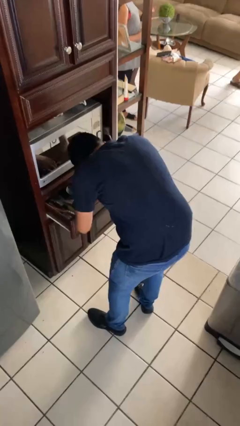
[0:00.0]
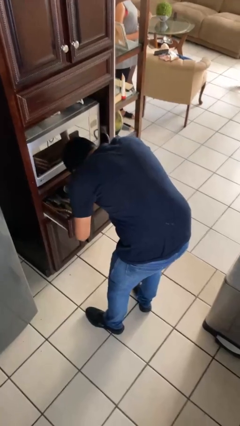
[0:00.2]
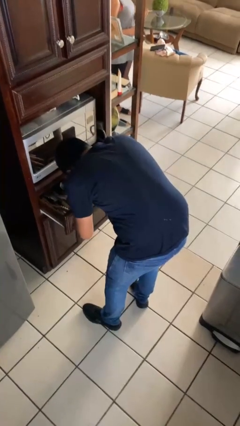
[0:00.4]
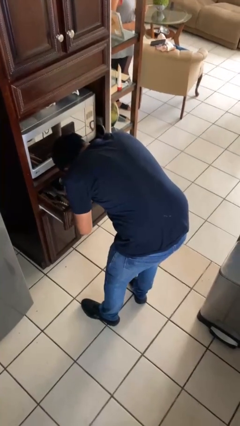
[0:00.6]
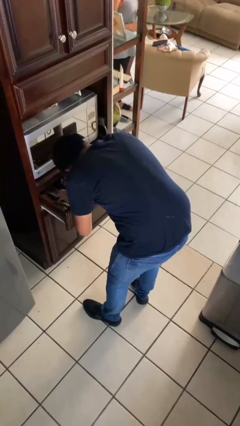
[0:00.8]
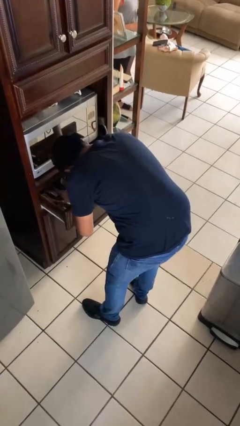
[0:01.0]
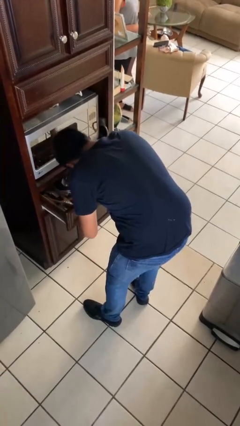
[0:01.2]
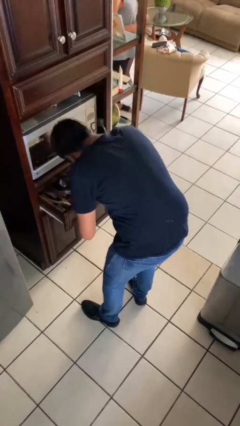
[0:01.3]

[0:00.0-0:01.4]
person searches in kitchen drawer

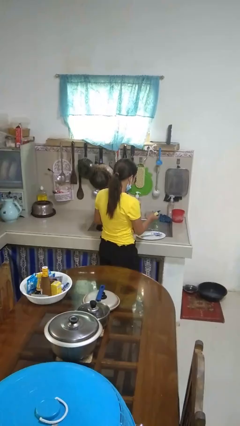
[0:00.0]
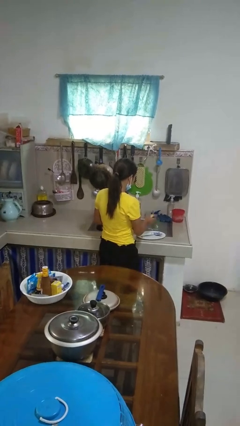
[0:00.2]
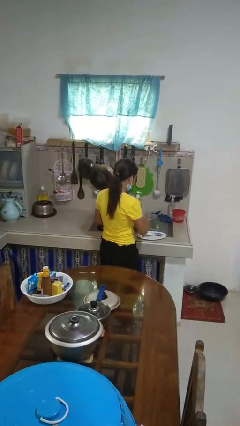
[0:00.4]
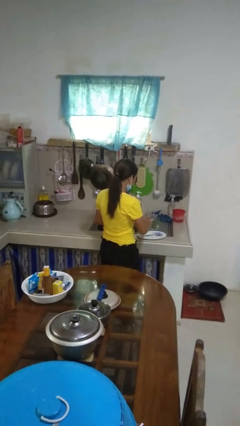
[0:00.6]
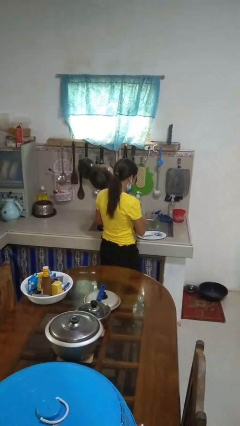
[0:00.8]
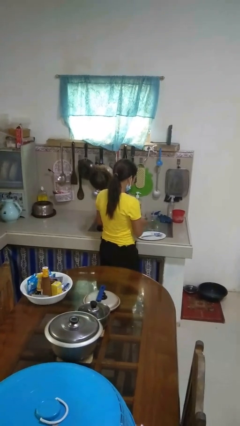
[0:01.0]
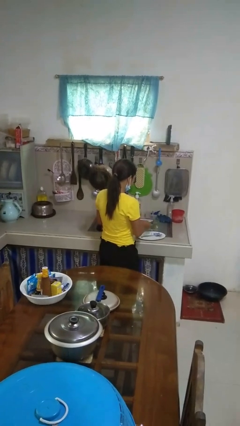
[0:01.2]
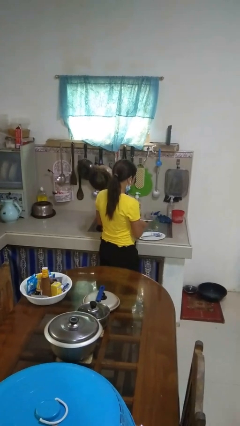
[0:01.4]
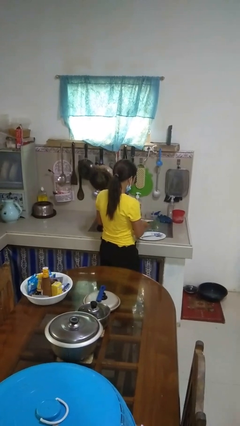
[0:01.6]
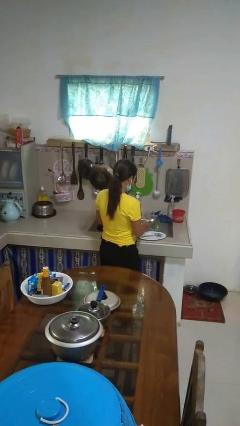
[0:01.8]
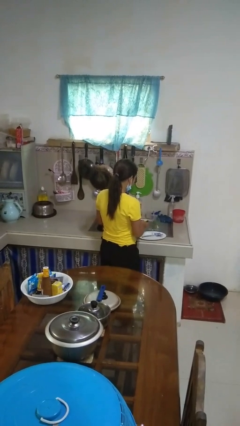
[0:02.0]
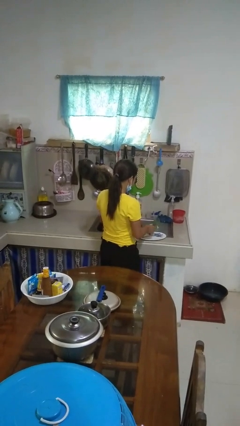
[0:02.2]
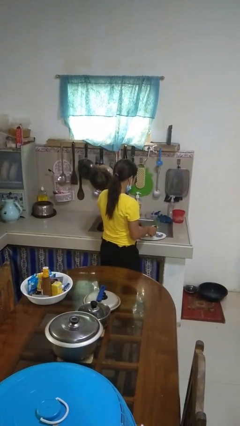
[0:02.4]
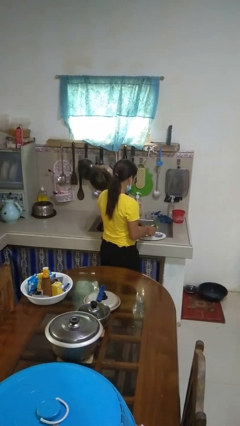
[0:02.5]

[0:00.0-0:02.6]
person washes dish

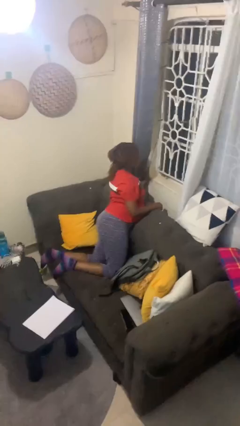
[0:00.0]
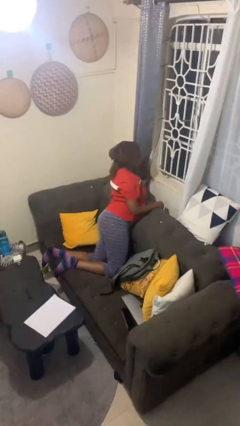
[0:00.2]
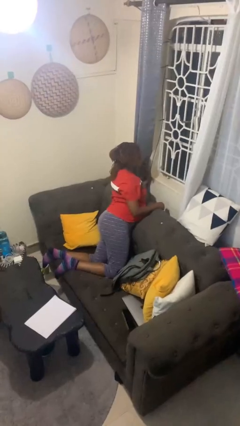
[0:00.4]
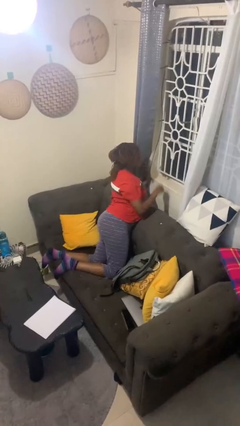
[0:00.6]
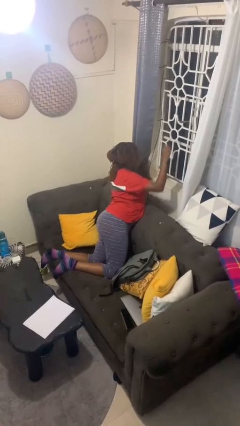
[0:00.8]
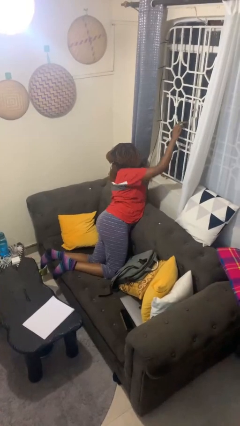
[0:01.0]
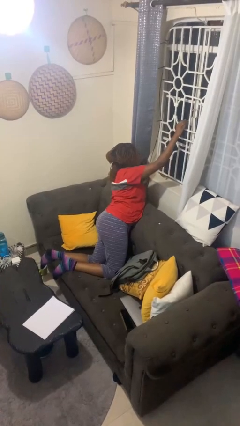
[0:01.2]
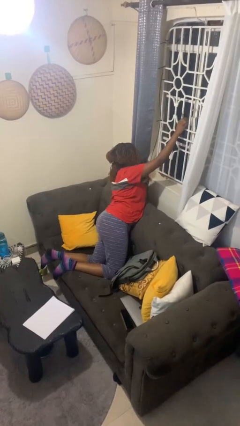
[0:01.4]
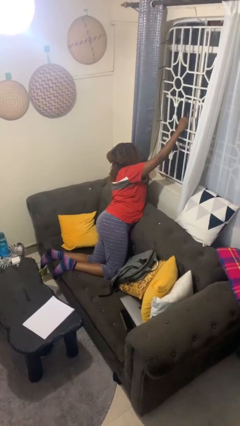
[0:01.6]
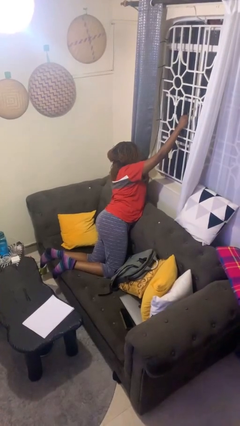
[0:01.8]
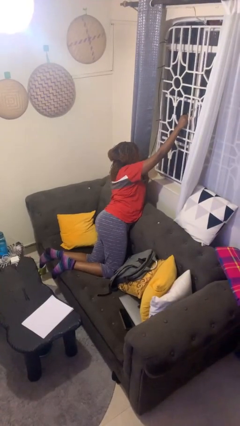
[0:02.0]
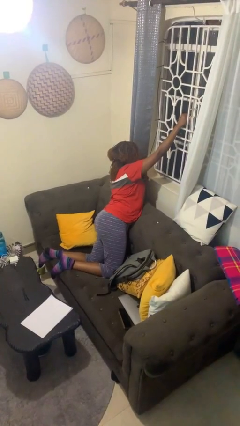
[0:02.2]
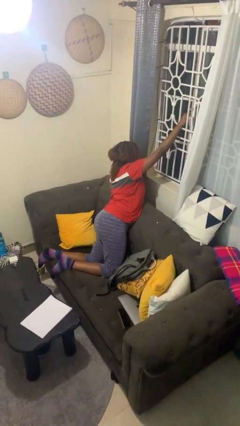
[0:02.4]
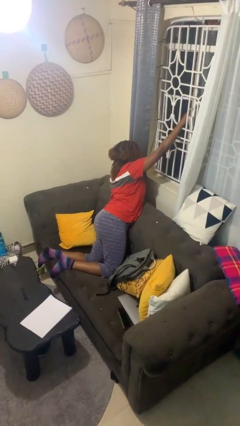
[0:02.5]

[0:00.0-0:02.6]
person opens home window

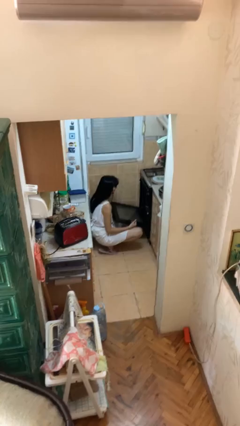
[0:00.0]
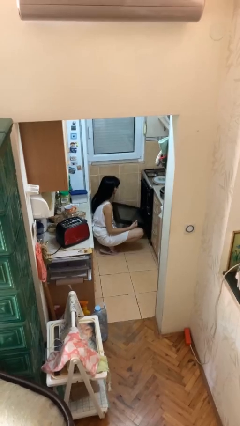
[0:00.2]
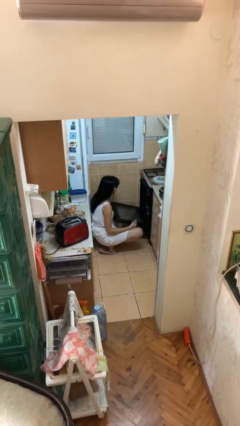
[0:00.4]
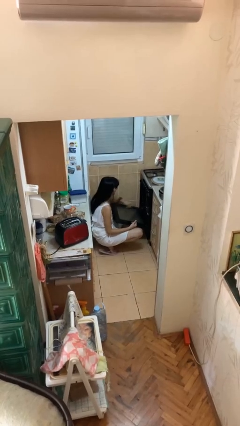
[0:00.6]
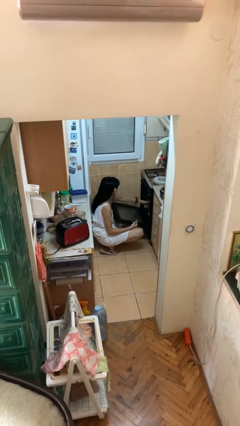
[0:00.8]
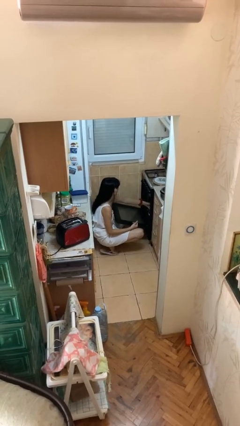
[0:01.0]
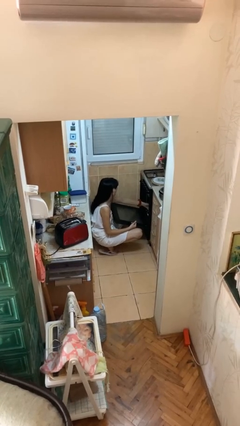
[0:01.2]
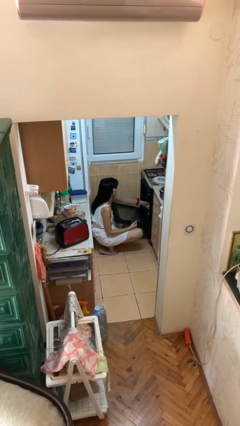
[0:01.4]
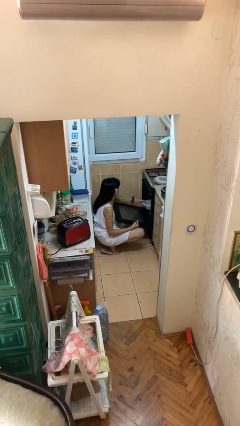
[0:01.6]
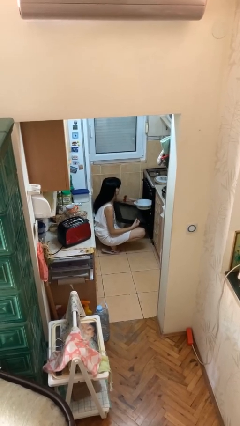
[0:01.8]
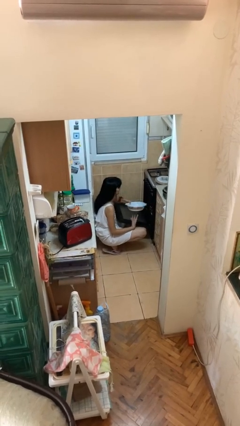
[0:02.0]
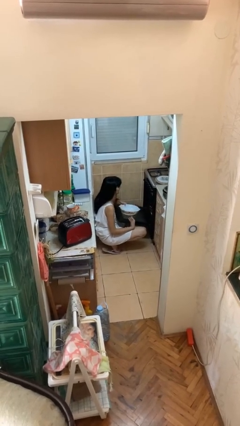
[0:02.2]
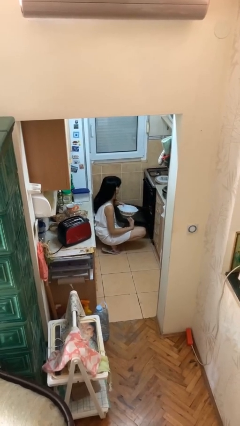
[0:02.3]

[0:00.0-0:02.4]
person takes object from oven

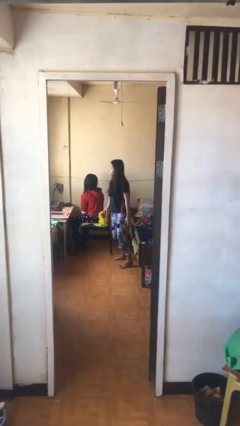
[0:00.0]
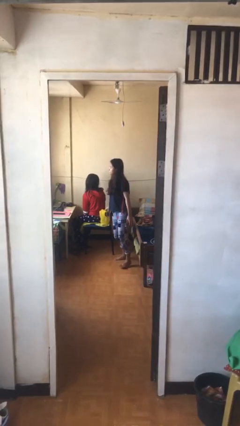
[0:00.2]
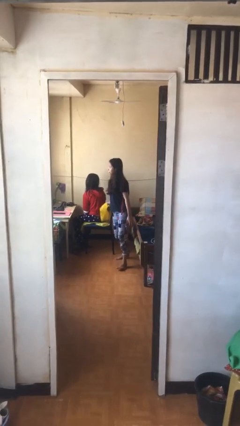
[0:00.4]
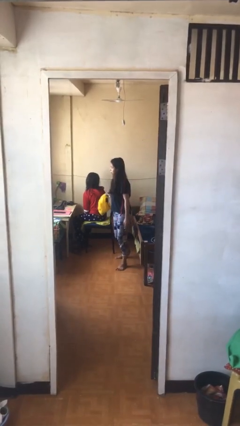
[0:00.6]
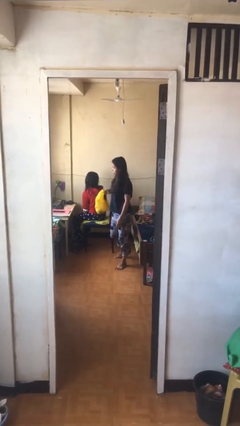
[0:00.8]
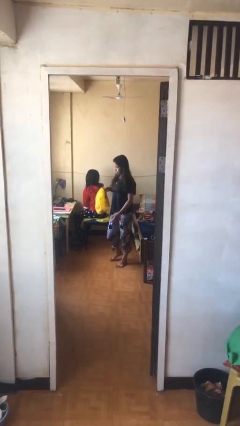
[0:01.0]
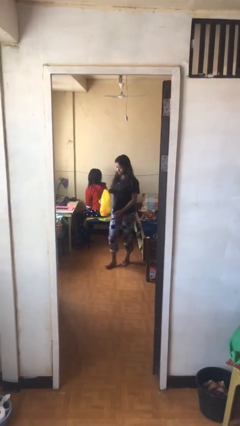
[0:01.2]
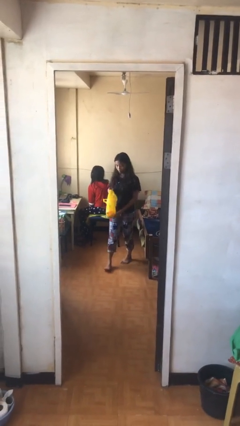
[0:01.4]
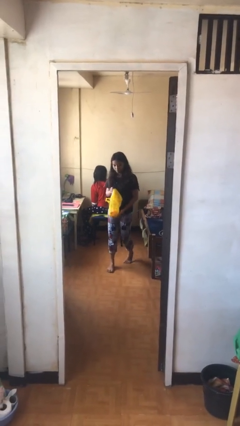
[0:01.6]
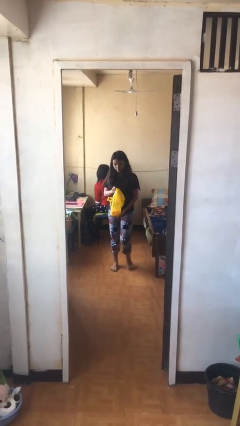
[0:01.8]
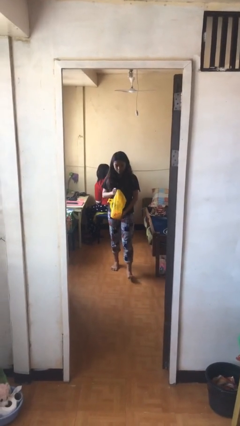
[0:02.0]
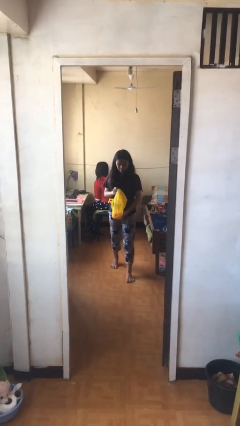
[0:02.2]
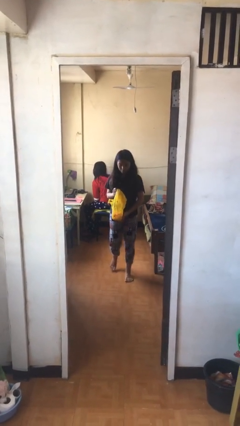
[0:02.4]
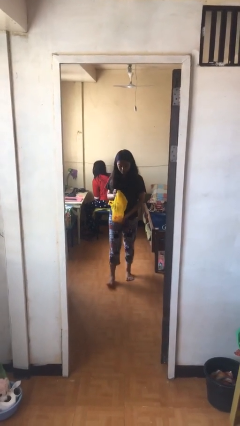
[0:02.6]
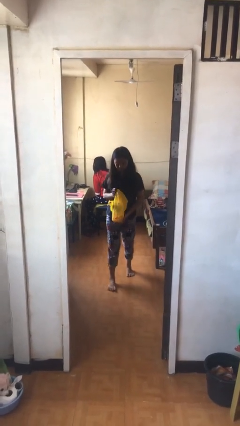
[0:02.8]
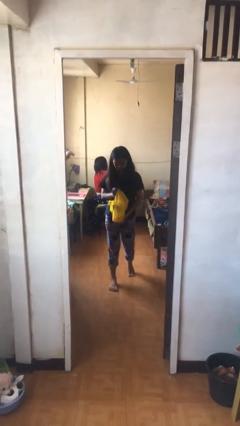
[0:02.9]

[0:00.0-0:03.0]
person steals object from person

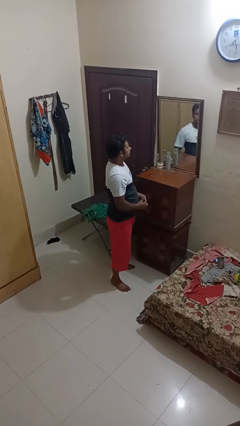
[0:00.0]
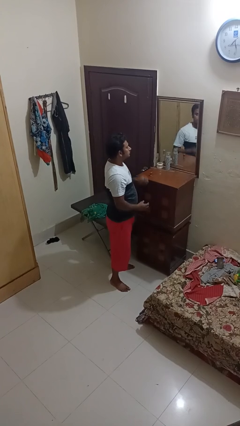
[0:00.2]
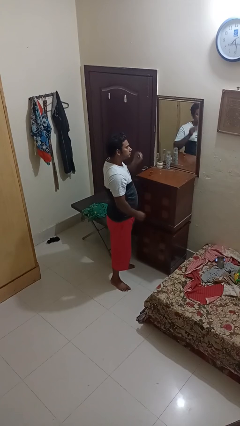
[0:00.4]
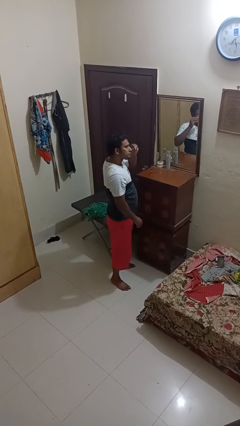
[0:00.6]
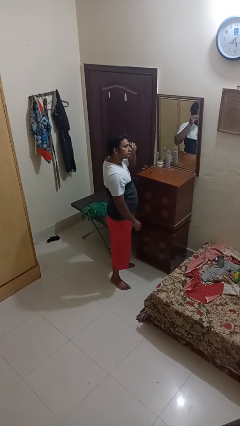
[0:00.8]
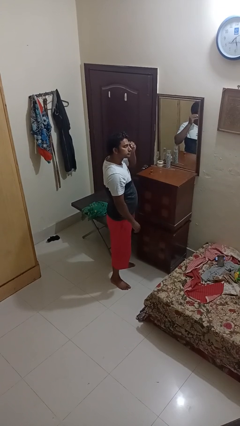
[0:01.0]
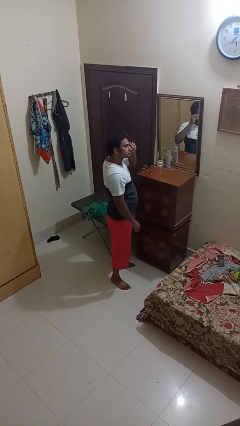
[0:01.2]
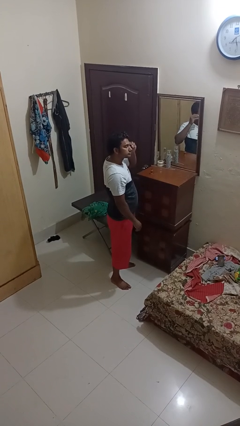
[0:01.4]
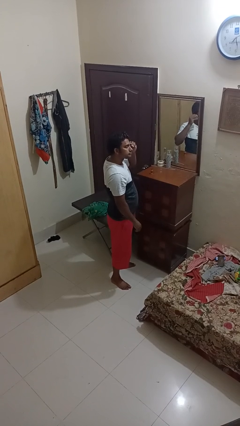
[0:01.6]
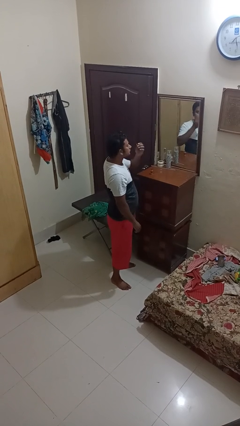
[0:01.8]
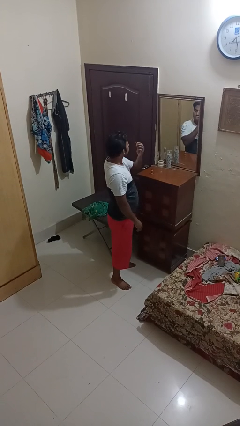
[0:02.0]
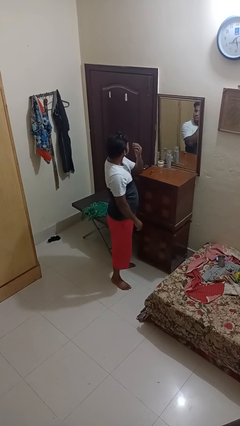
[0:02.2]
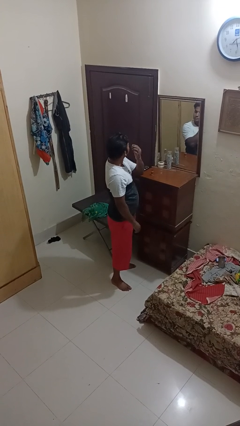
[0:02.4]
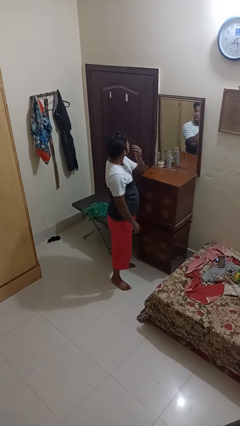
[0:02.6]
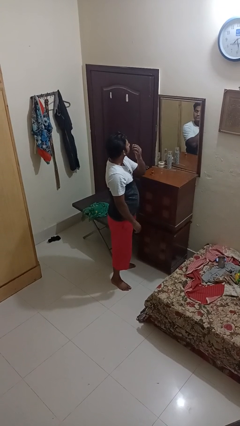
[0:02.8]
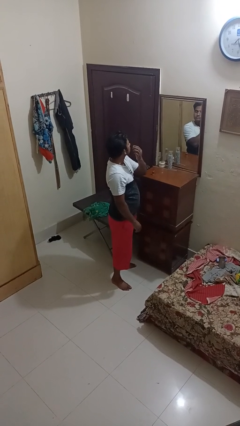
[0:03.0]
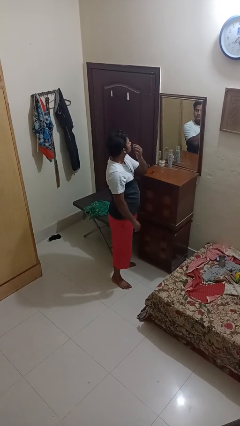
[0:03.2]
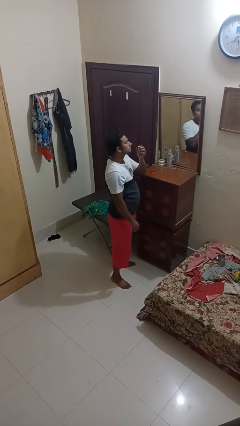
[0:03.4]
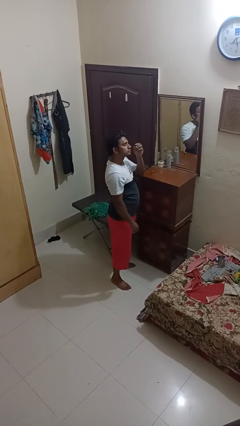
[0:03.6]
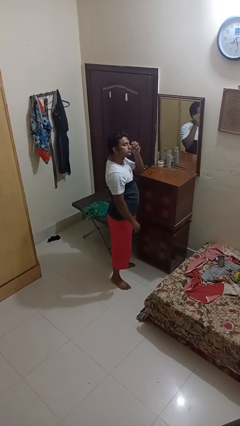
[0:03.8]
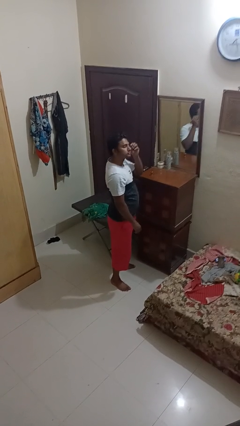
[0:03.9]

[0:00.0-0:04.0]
person applies eye makeup

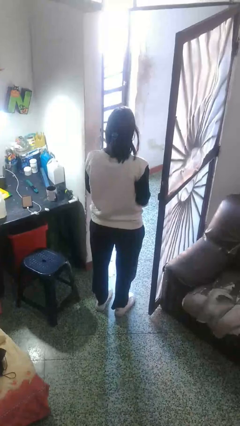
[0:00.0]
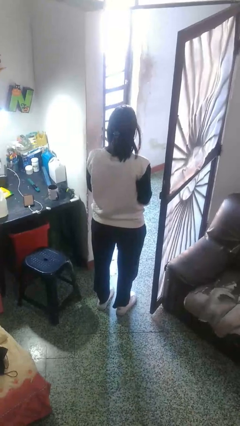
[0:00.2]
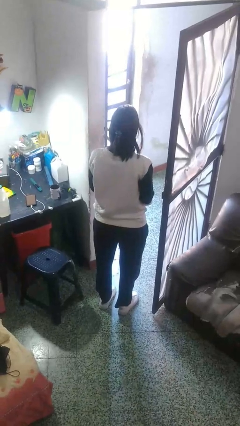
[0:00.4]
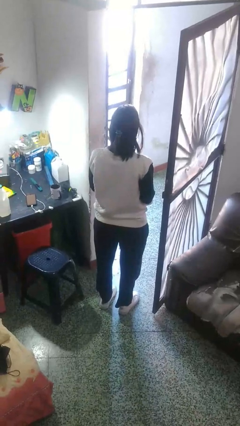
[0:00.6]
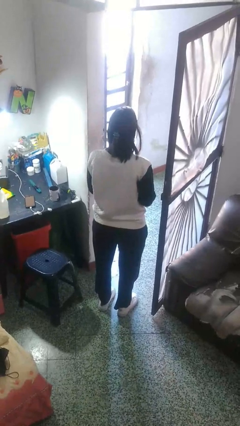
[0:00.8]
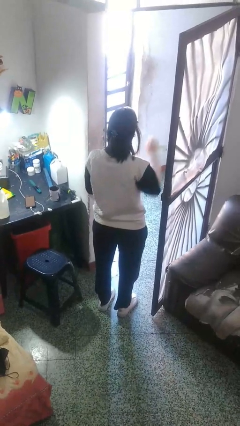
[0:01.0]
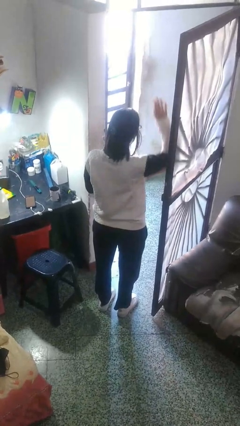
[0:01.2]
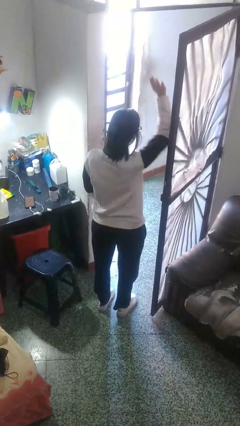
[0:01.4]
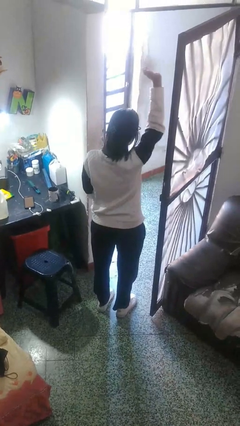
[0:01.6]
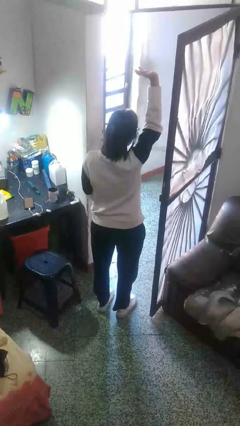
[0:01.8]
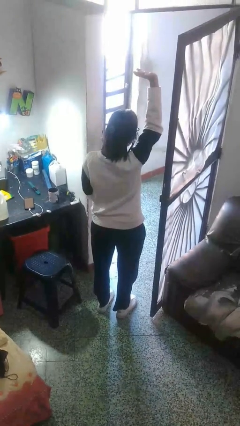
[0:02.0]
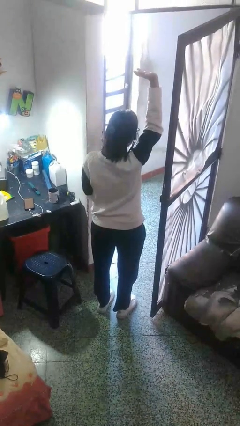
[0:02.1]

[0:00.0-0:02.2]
person gestures raise hand
